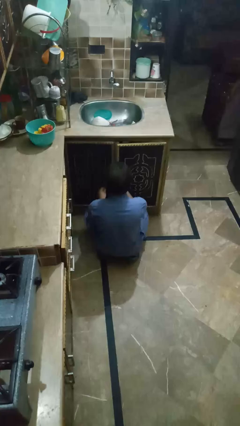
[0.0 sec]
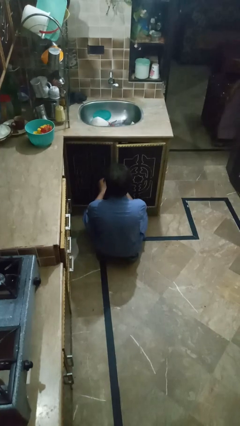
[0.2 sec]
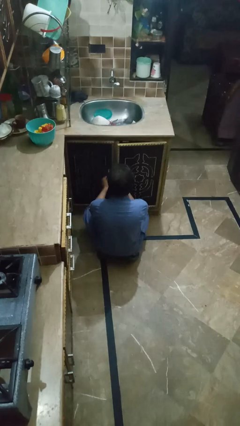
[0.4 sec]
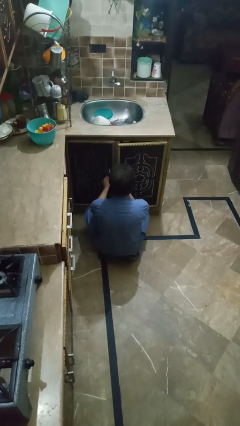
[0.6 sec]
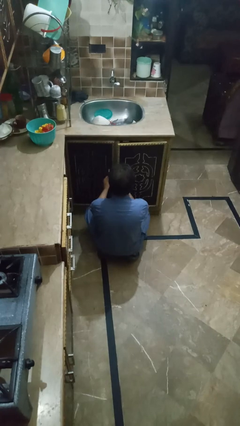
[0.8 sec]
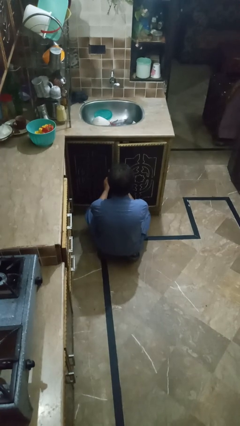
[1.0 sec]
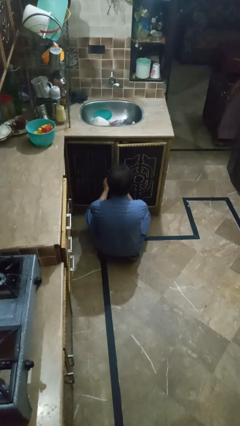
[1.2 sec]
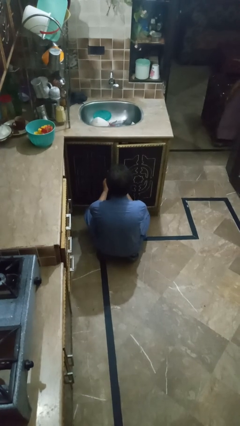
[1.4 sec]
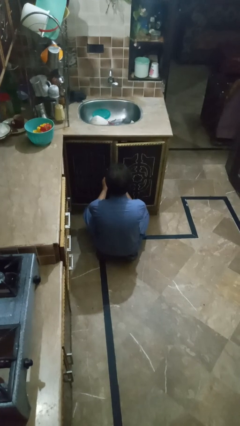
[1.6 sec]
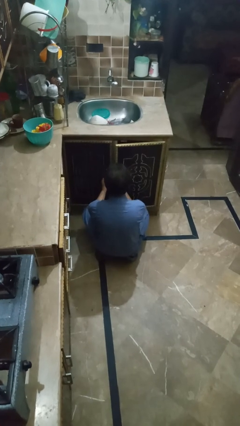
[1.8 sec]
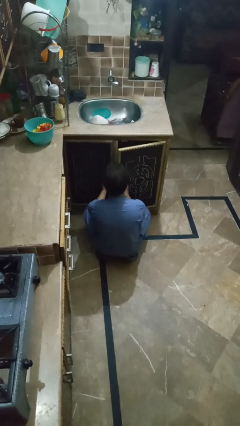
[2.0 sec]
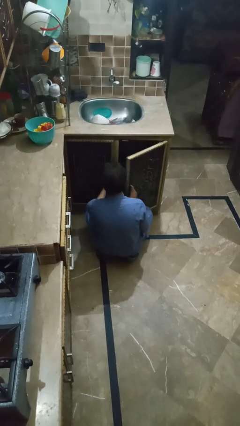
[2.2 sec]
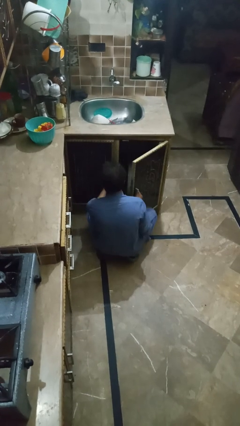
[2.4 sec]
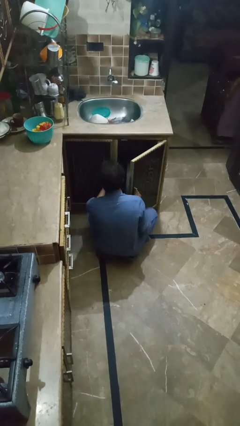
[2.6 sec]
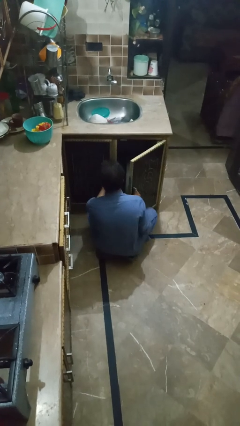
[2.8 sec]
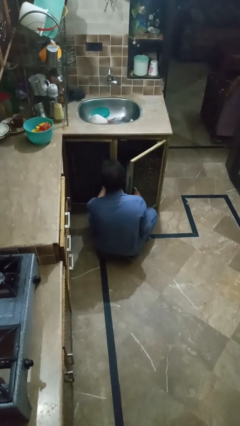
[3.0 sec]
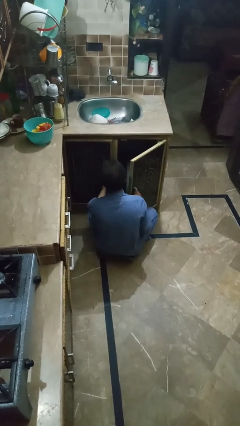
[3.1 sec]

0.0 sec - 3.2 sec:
person opens kitchen drawer

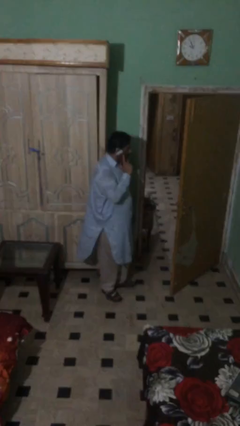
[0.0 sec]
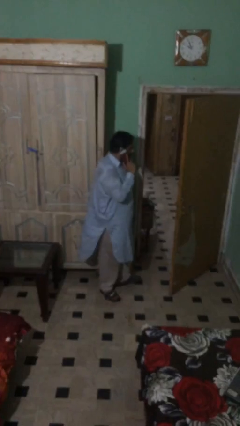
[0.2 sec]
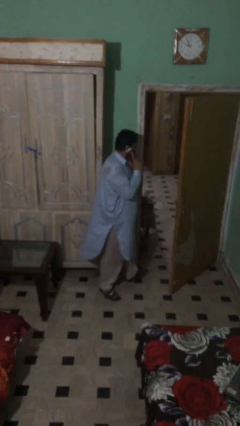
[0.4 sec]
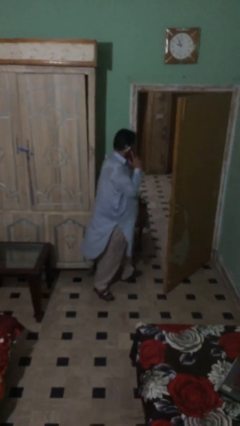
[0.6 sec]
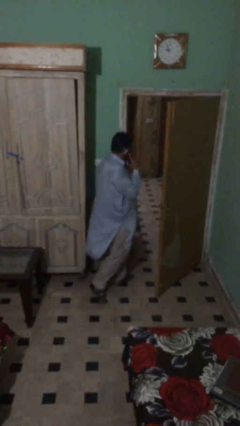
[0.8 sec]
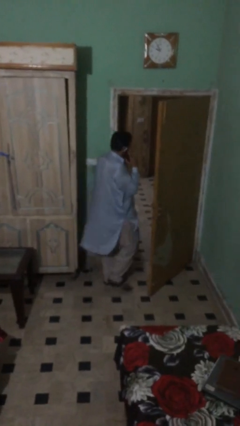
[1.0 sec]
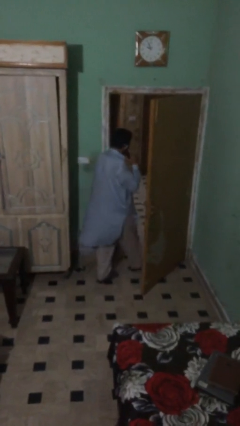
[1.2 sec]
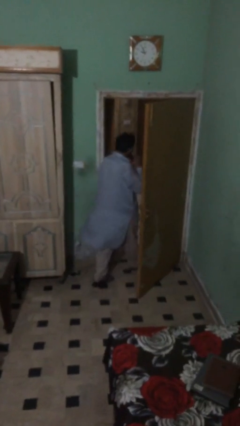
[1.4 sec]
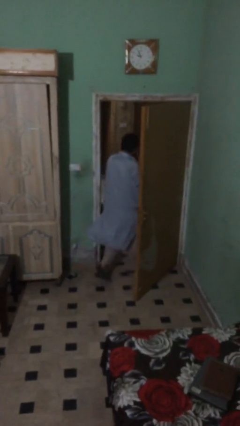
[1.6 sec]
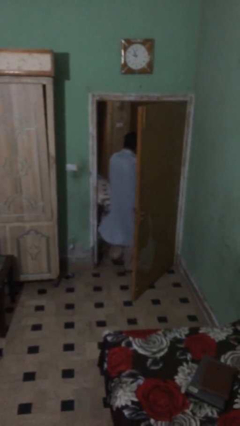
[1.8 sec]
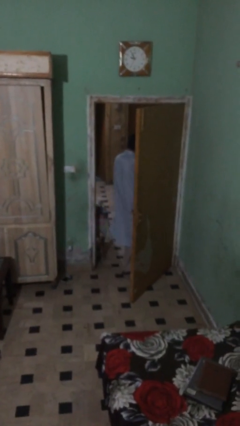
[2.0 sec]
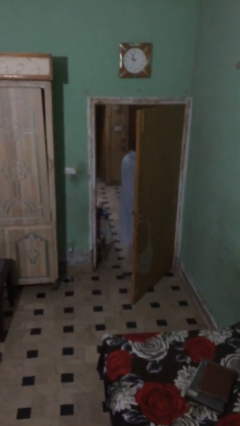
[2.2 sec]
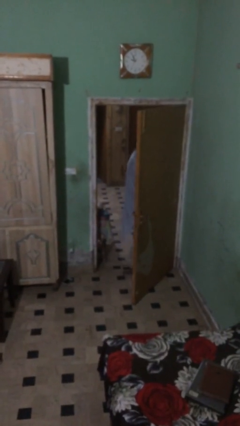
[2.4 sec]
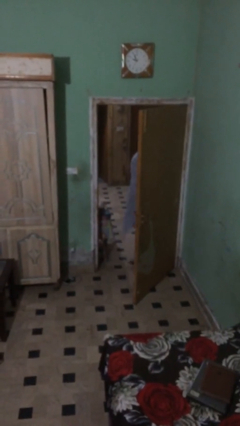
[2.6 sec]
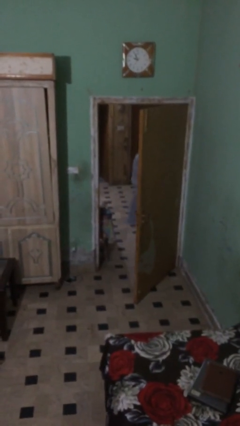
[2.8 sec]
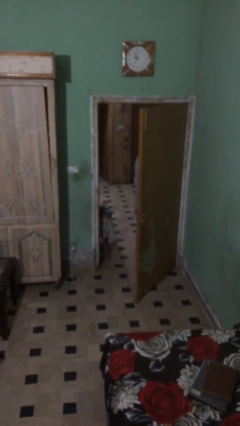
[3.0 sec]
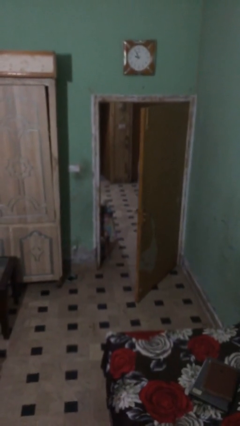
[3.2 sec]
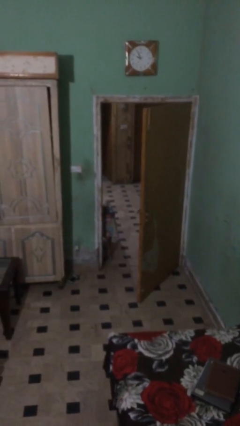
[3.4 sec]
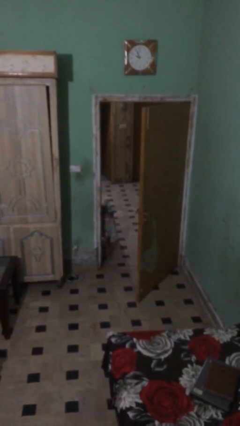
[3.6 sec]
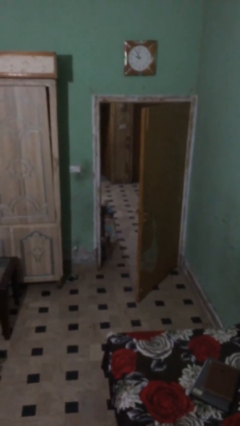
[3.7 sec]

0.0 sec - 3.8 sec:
person exits scene through structure

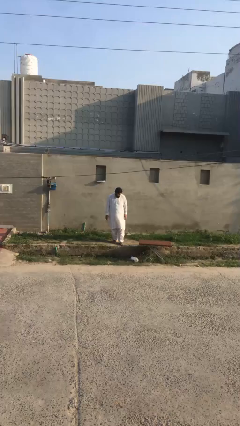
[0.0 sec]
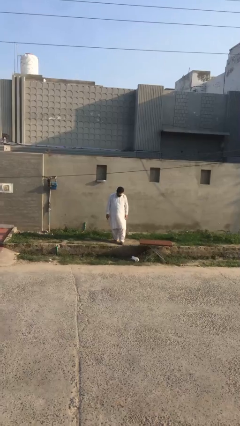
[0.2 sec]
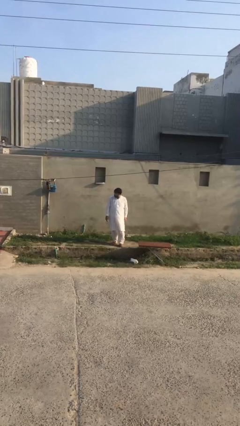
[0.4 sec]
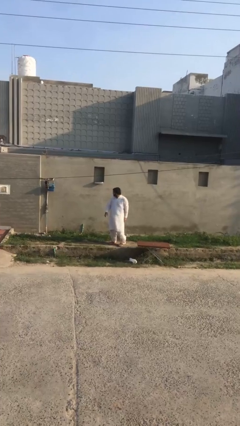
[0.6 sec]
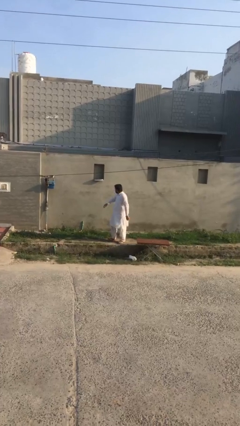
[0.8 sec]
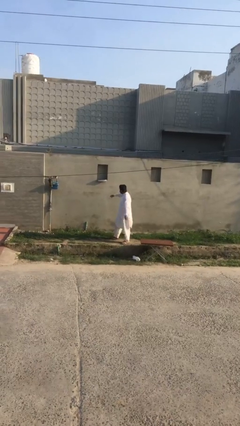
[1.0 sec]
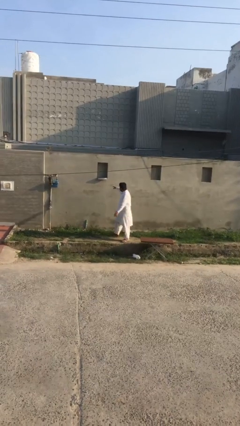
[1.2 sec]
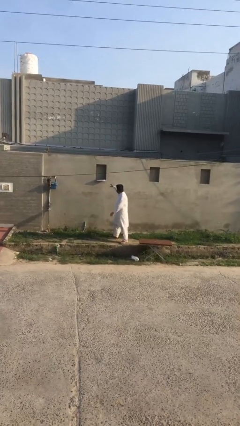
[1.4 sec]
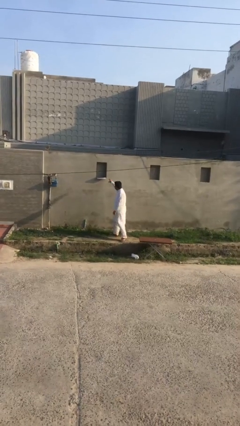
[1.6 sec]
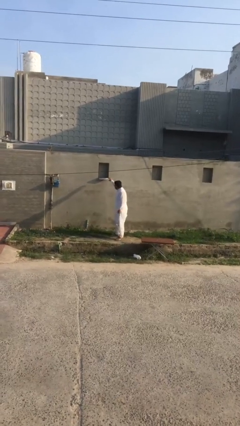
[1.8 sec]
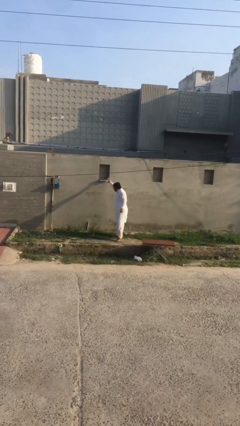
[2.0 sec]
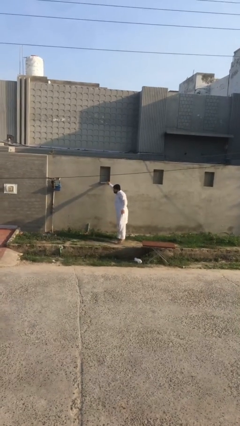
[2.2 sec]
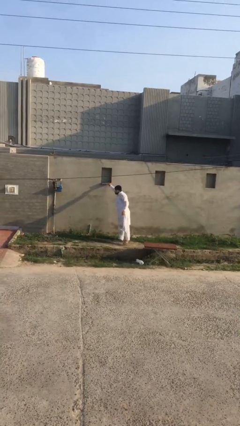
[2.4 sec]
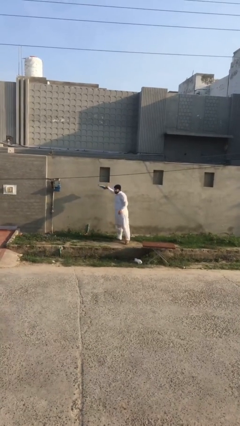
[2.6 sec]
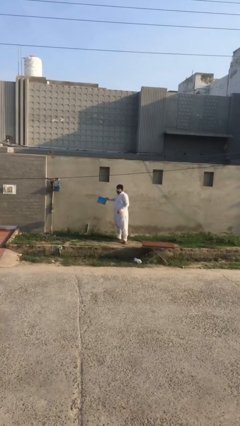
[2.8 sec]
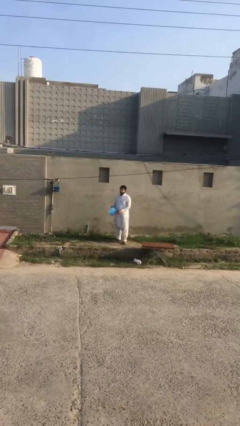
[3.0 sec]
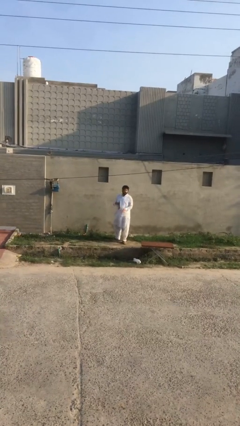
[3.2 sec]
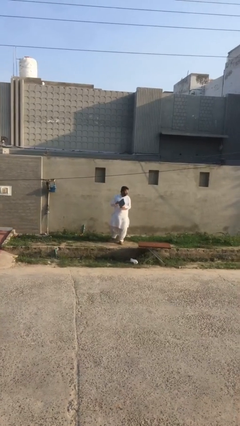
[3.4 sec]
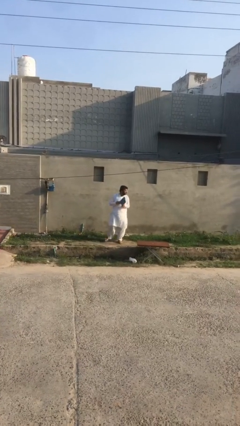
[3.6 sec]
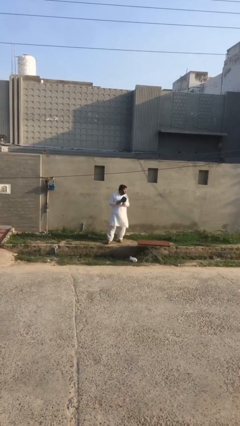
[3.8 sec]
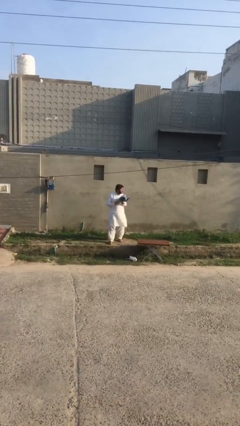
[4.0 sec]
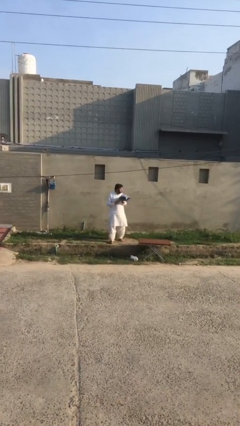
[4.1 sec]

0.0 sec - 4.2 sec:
person picks up object from shelf

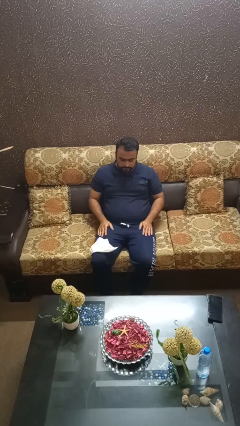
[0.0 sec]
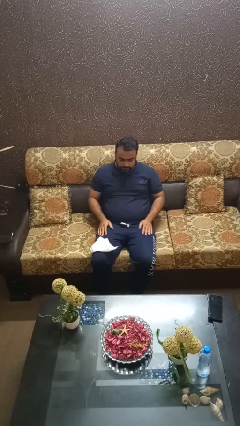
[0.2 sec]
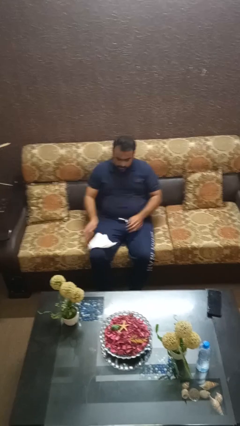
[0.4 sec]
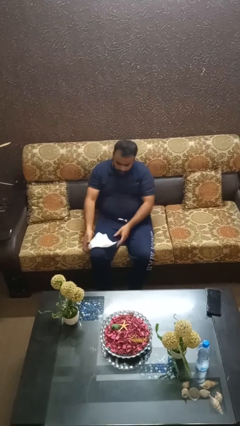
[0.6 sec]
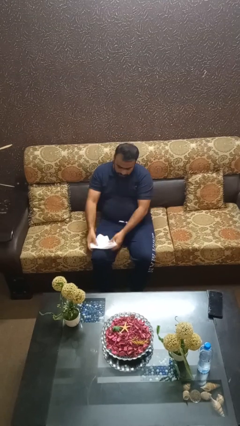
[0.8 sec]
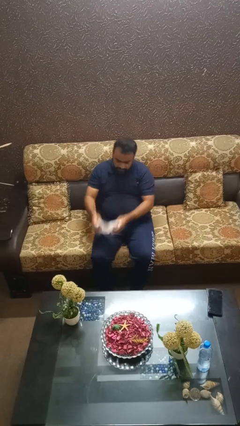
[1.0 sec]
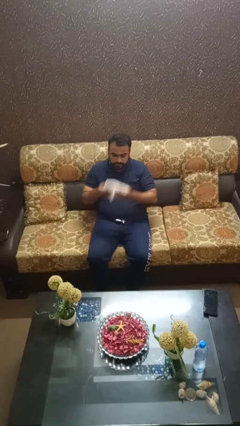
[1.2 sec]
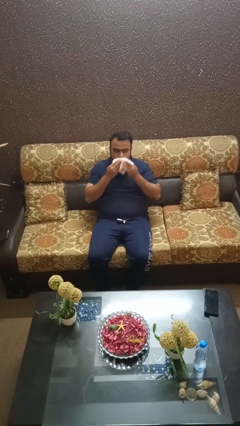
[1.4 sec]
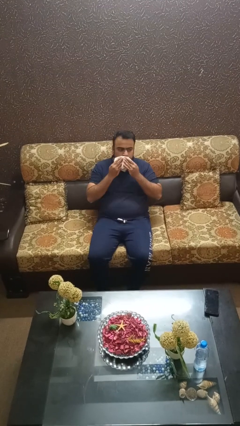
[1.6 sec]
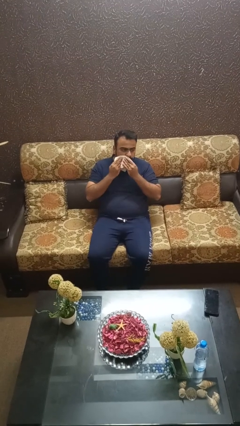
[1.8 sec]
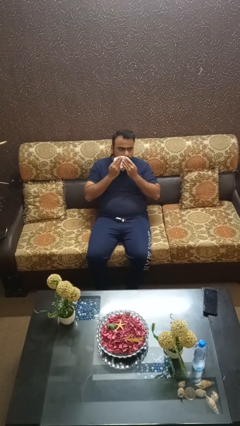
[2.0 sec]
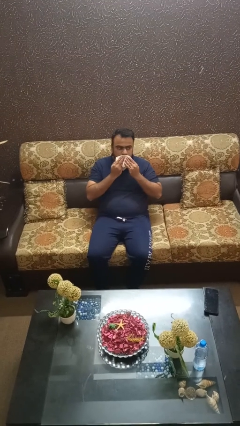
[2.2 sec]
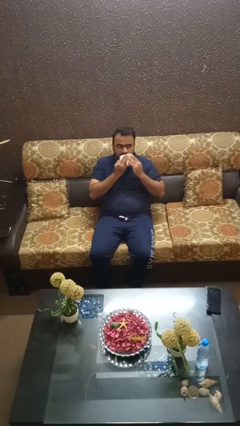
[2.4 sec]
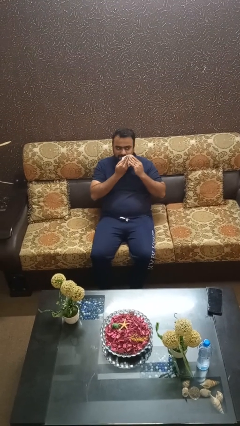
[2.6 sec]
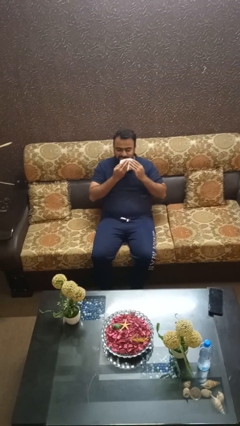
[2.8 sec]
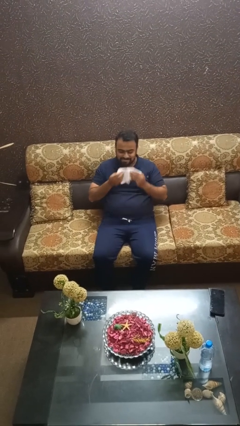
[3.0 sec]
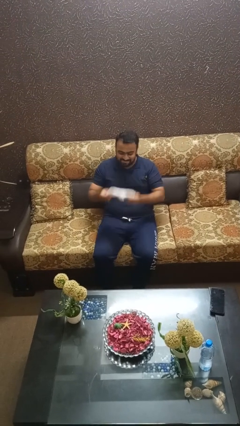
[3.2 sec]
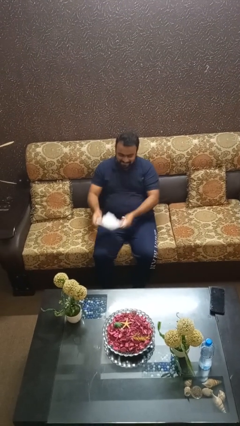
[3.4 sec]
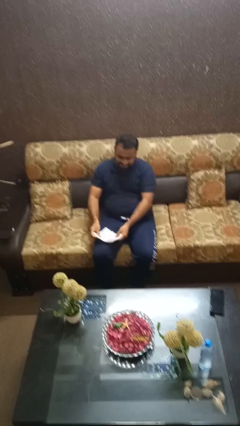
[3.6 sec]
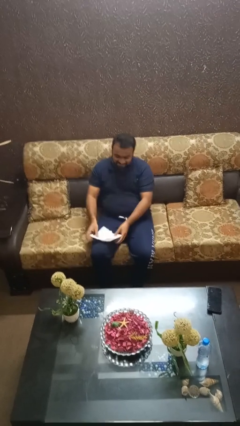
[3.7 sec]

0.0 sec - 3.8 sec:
person wipes mouth with napkin

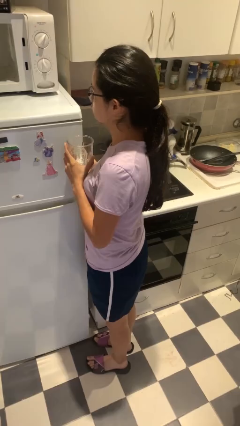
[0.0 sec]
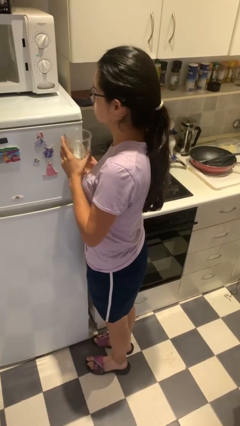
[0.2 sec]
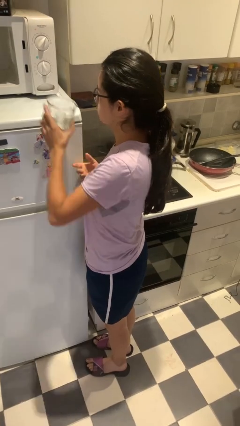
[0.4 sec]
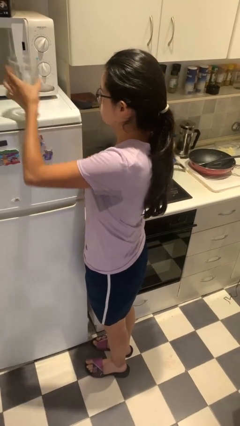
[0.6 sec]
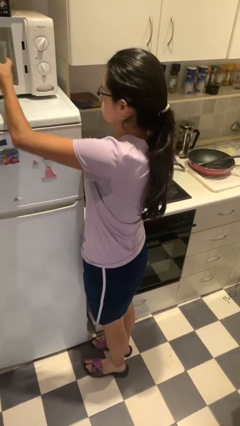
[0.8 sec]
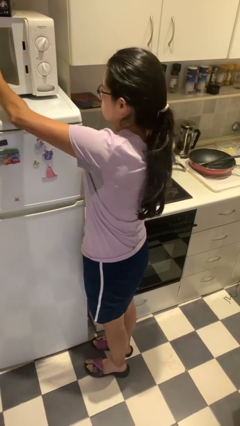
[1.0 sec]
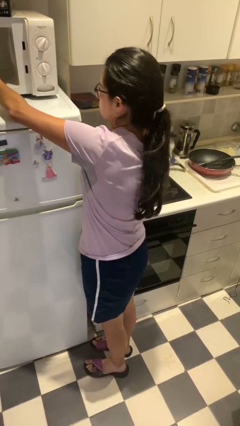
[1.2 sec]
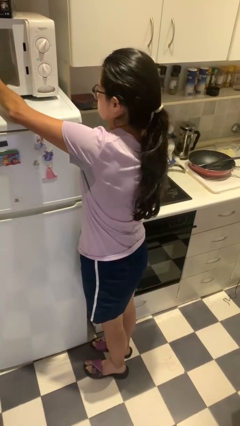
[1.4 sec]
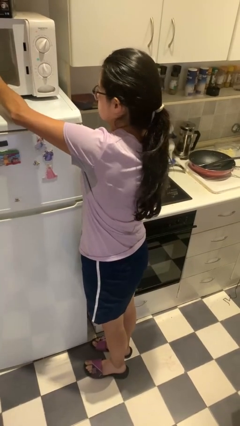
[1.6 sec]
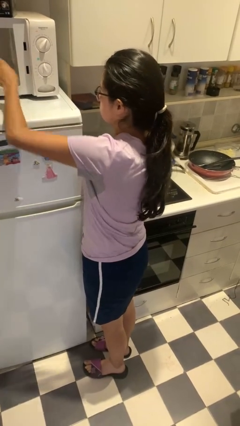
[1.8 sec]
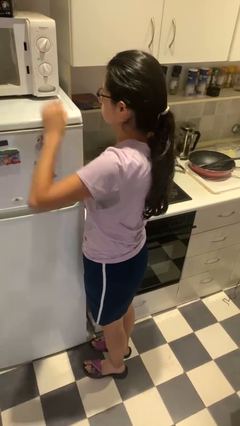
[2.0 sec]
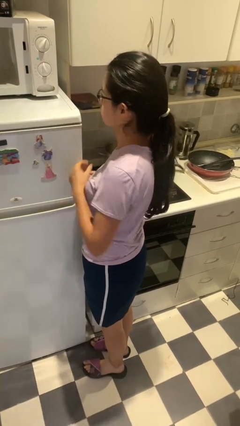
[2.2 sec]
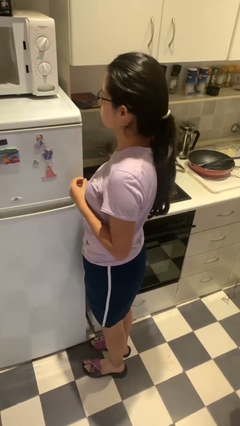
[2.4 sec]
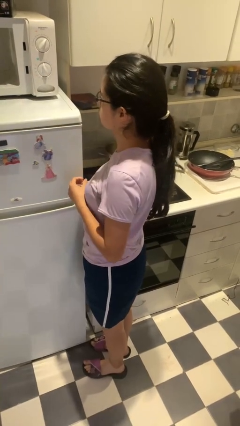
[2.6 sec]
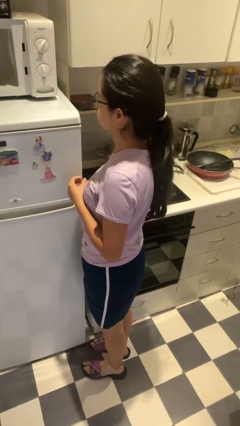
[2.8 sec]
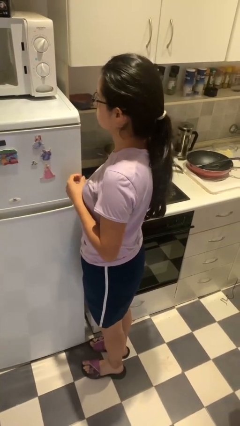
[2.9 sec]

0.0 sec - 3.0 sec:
person puts object into microwave
